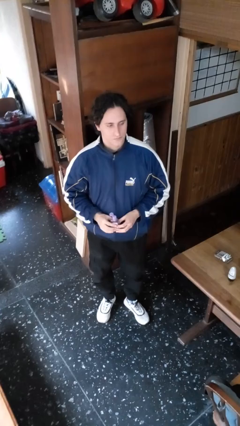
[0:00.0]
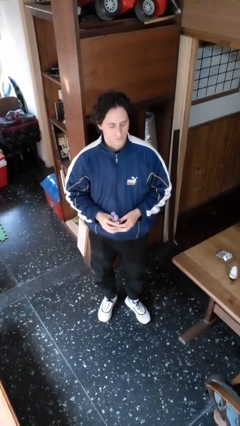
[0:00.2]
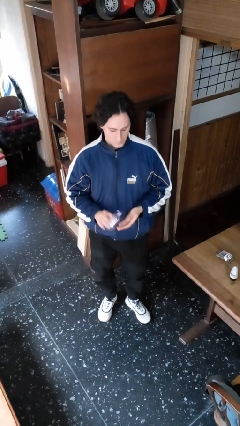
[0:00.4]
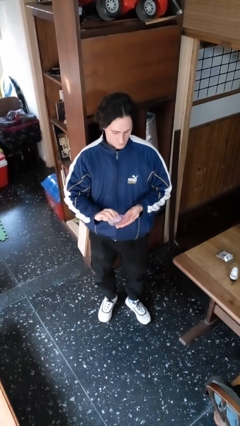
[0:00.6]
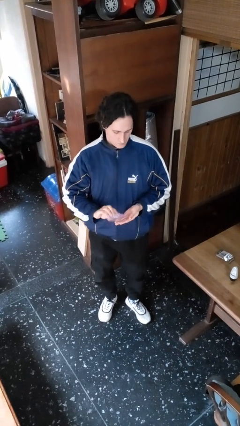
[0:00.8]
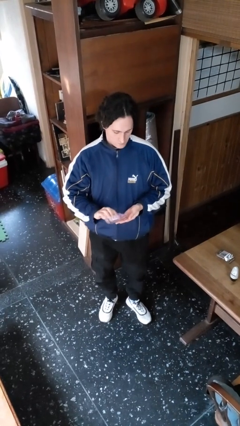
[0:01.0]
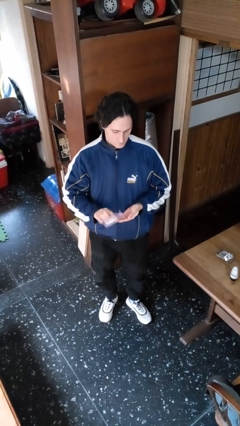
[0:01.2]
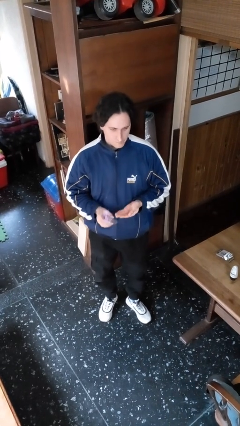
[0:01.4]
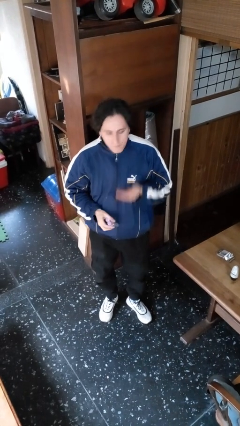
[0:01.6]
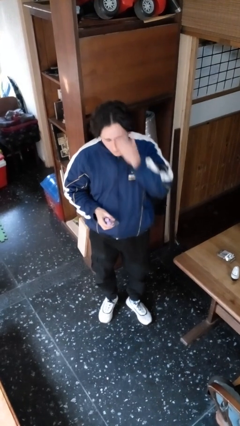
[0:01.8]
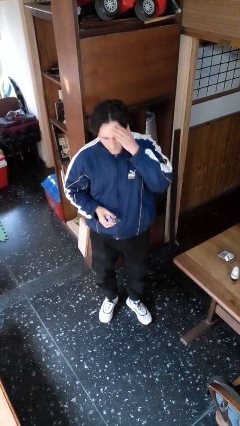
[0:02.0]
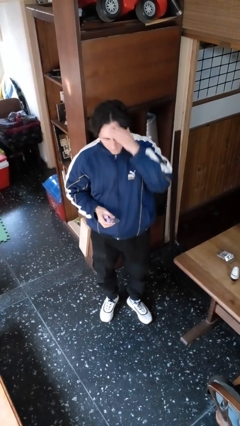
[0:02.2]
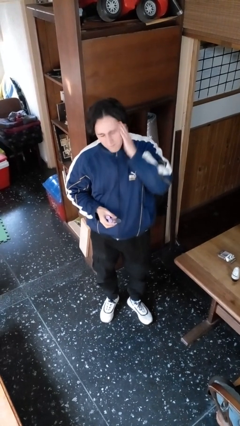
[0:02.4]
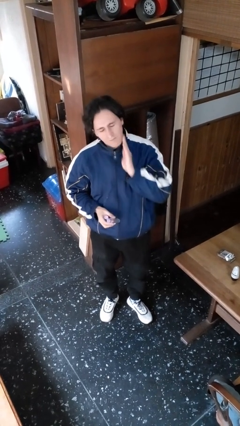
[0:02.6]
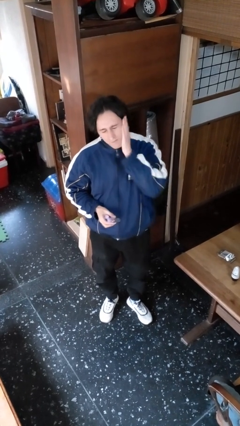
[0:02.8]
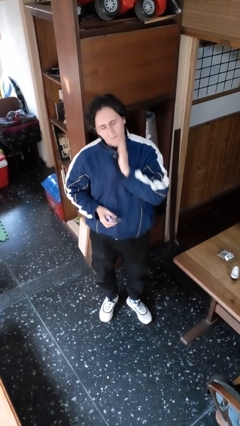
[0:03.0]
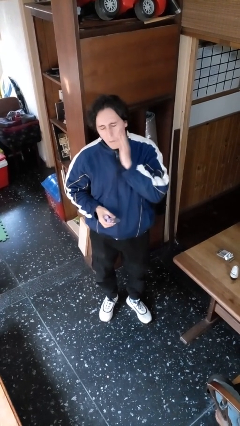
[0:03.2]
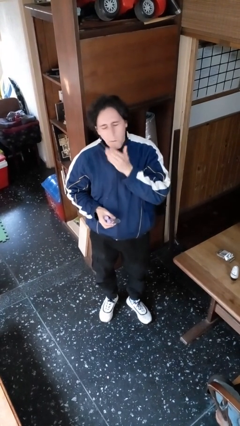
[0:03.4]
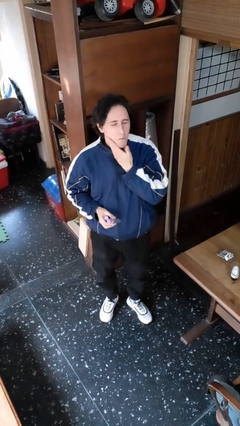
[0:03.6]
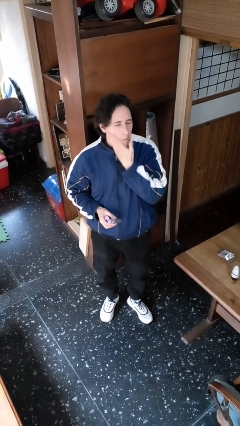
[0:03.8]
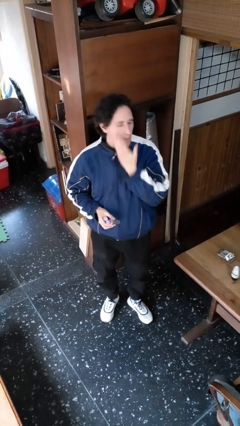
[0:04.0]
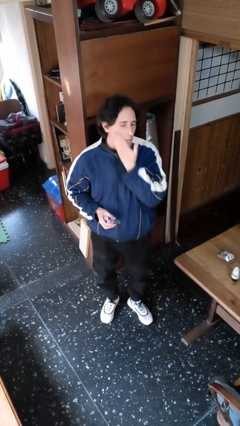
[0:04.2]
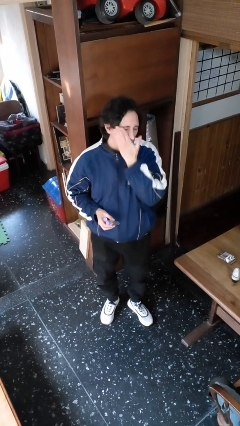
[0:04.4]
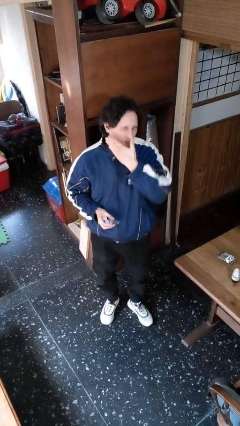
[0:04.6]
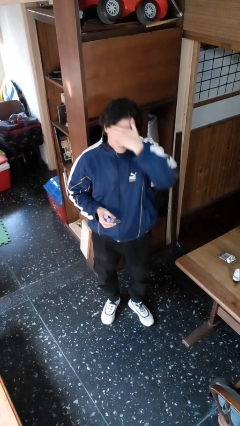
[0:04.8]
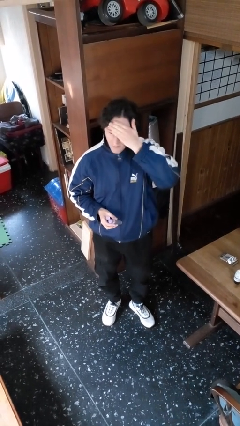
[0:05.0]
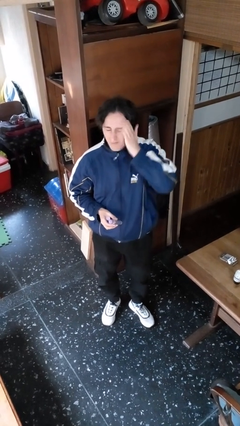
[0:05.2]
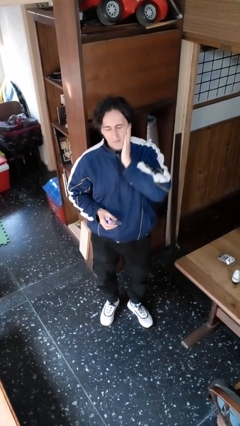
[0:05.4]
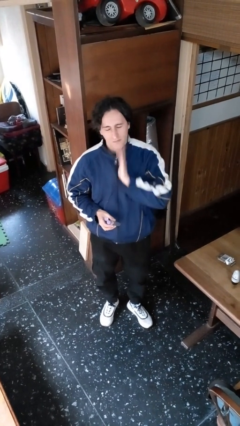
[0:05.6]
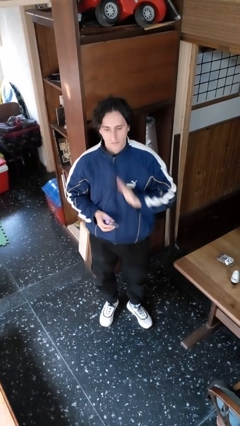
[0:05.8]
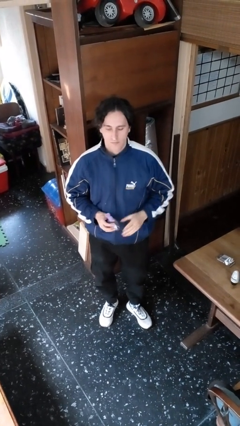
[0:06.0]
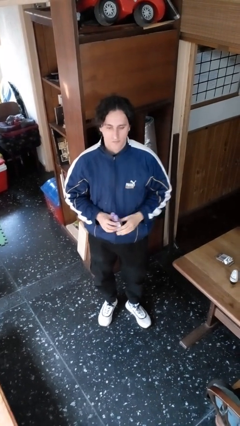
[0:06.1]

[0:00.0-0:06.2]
person applies facial moisturizer

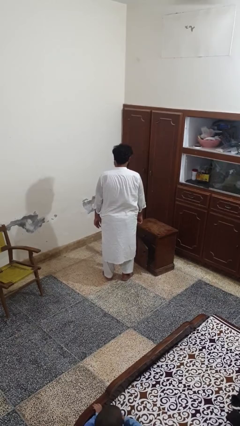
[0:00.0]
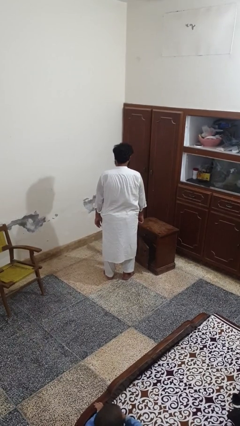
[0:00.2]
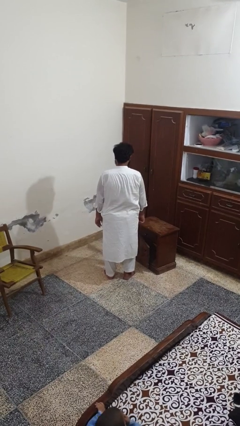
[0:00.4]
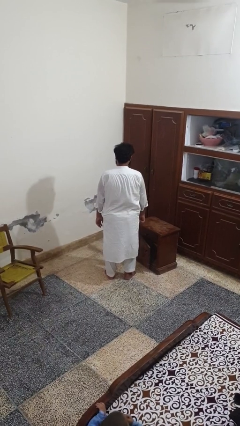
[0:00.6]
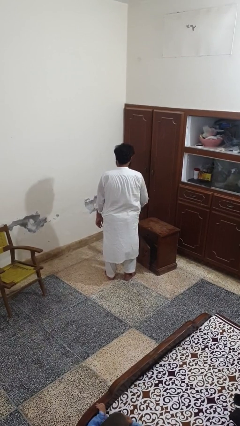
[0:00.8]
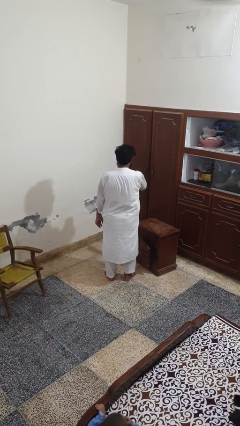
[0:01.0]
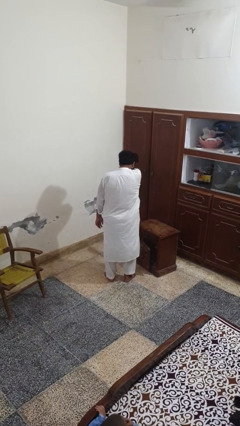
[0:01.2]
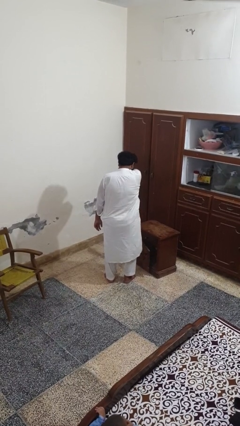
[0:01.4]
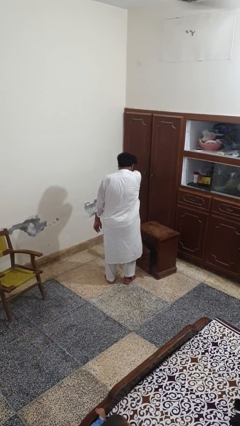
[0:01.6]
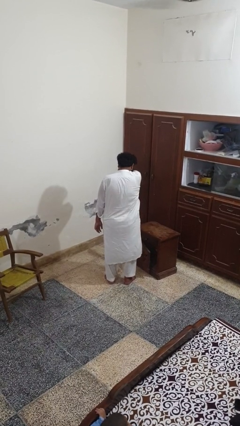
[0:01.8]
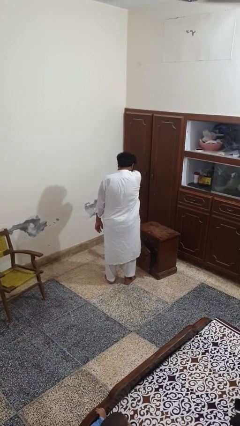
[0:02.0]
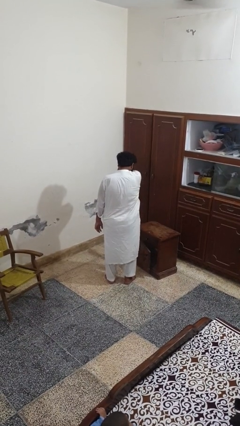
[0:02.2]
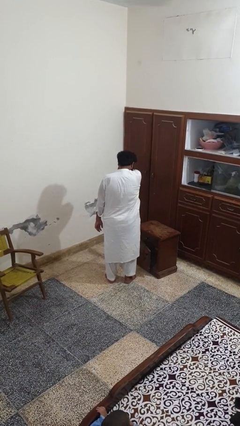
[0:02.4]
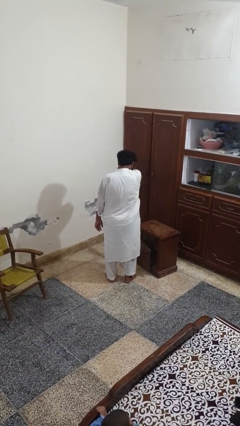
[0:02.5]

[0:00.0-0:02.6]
person sneezes into arm

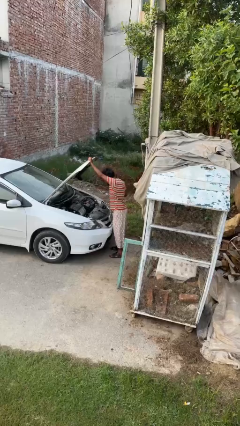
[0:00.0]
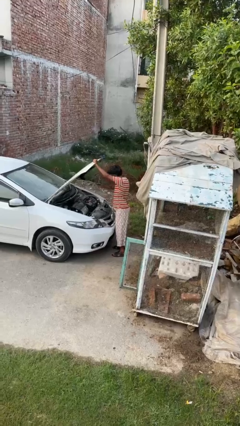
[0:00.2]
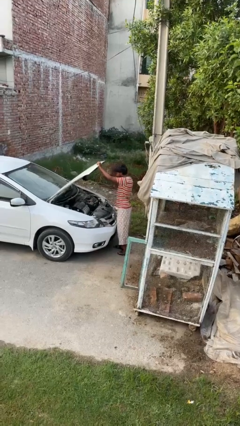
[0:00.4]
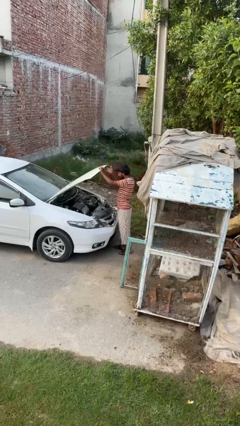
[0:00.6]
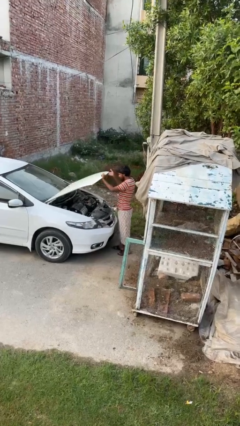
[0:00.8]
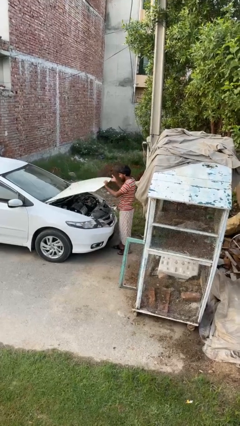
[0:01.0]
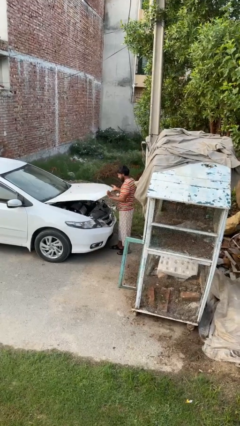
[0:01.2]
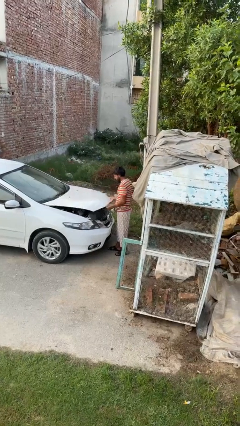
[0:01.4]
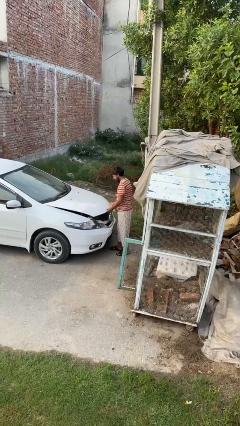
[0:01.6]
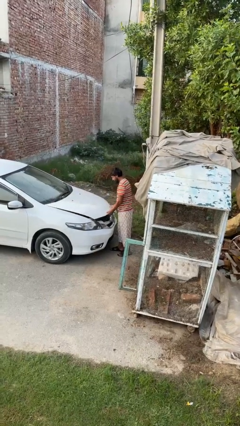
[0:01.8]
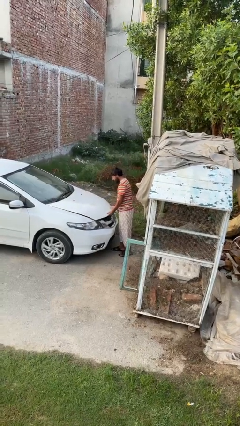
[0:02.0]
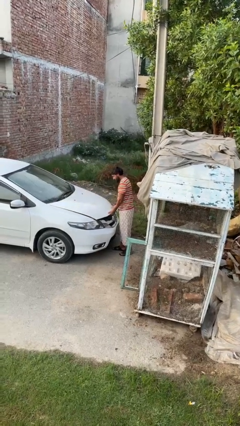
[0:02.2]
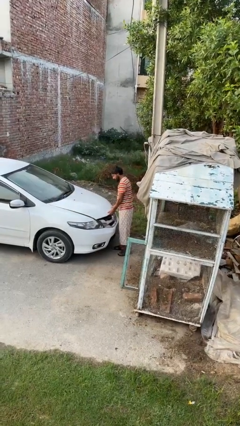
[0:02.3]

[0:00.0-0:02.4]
person closes car hood

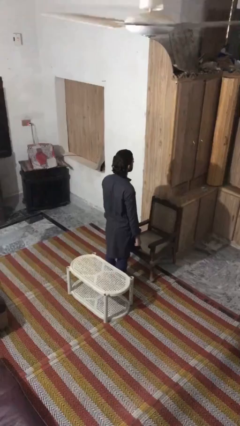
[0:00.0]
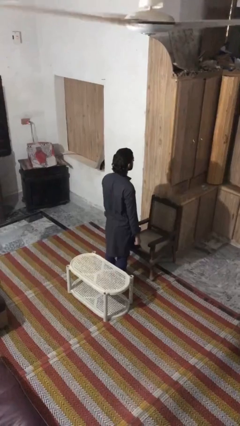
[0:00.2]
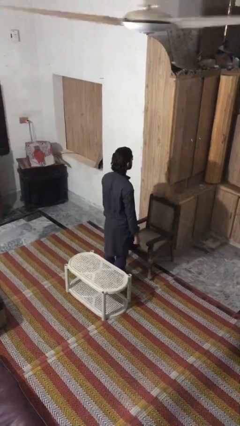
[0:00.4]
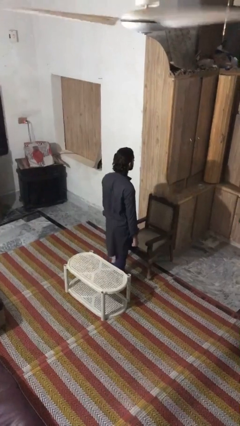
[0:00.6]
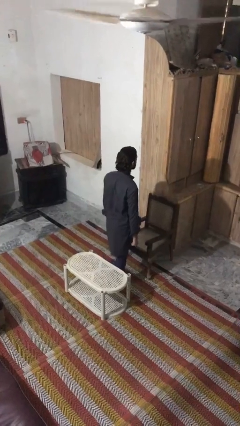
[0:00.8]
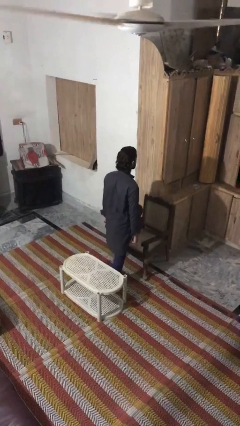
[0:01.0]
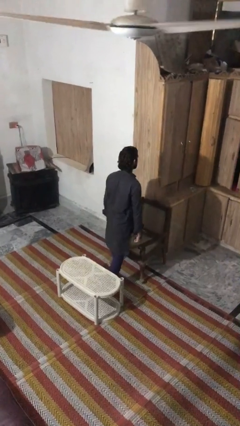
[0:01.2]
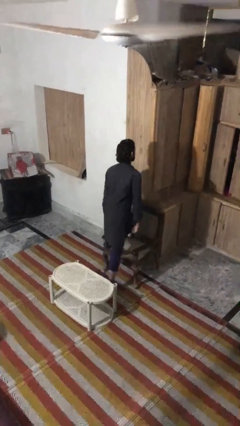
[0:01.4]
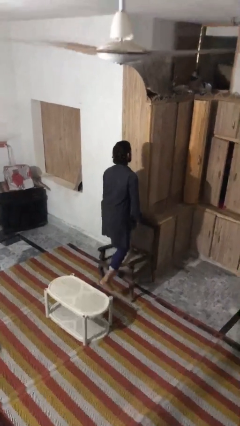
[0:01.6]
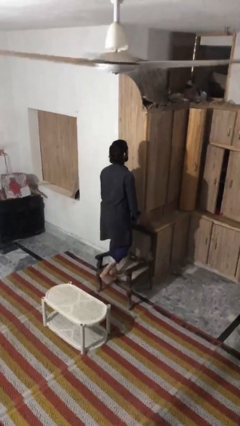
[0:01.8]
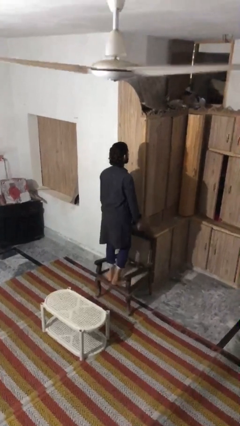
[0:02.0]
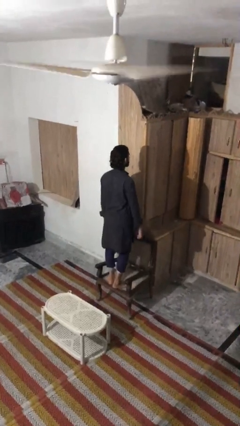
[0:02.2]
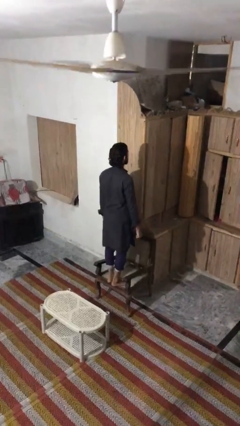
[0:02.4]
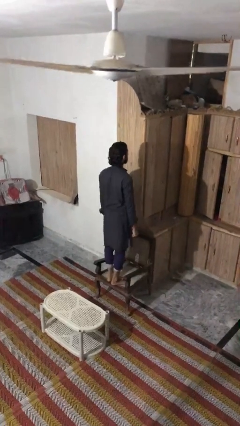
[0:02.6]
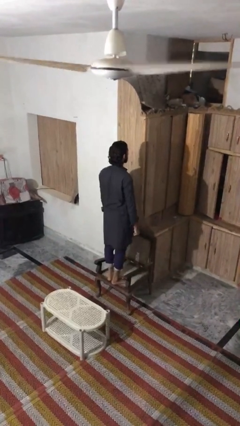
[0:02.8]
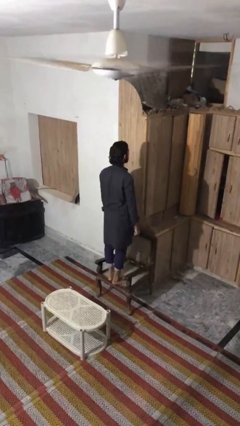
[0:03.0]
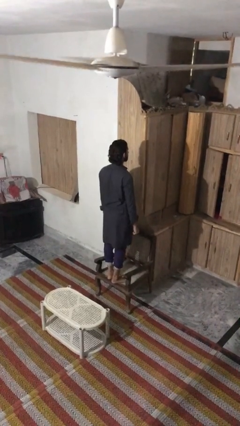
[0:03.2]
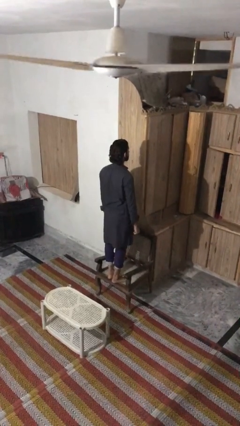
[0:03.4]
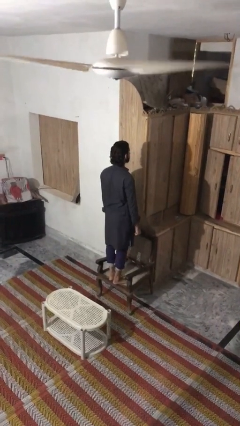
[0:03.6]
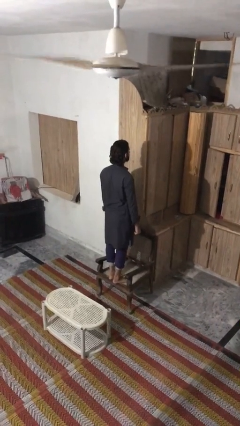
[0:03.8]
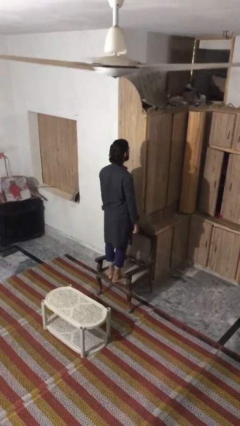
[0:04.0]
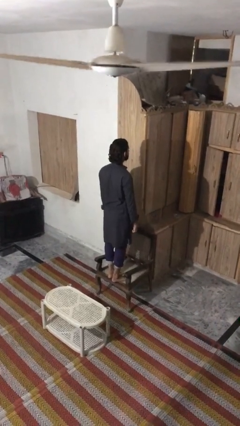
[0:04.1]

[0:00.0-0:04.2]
person climbs on chair

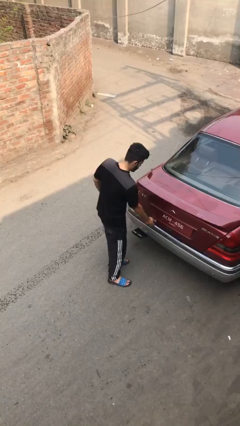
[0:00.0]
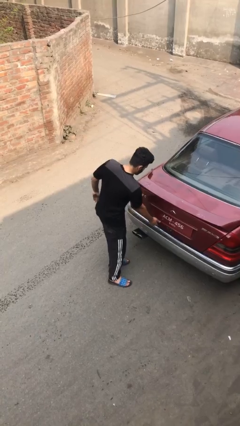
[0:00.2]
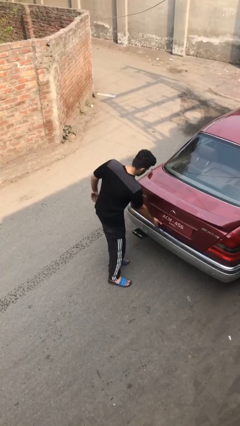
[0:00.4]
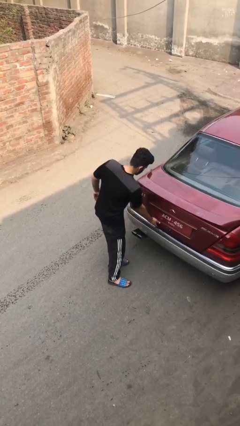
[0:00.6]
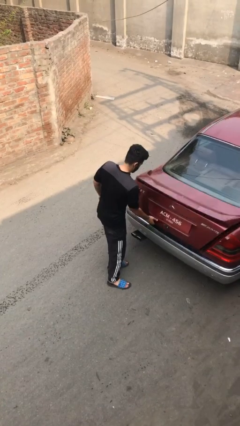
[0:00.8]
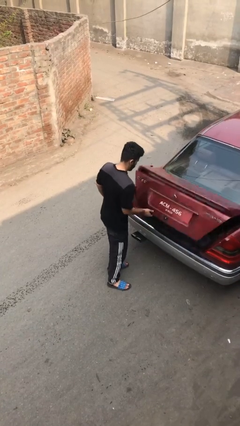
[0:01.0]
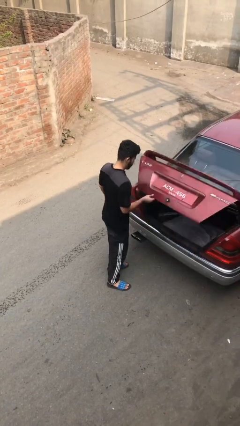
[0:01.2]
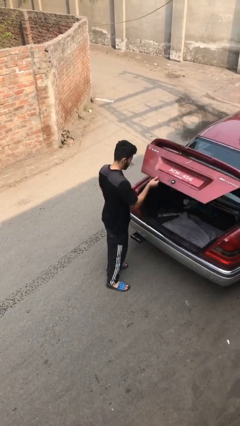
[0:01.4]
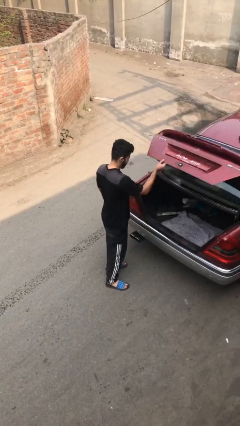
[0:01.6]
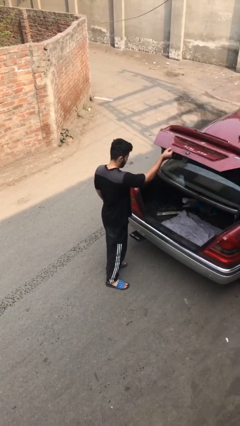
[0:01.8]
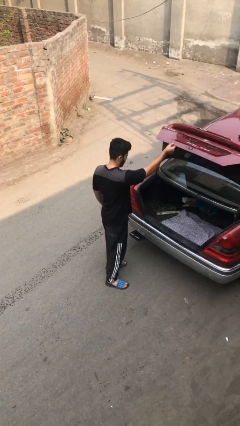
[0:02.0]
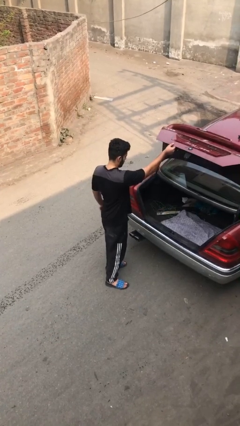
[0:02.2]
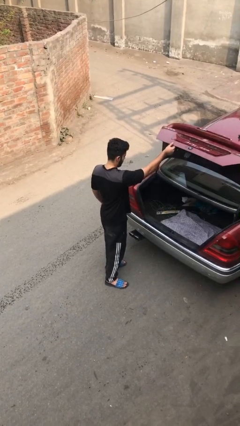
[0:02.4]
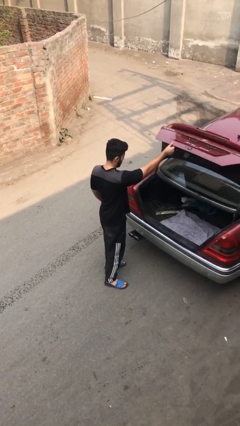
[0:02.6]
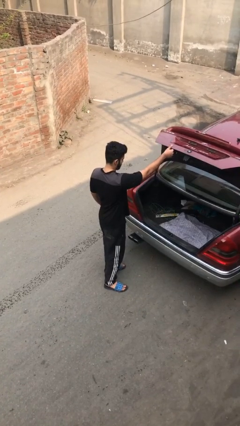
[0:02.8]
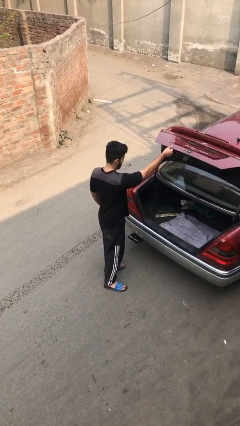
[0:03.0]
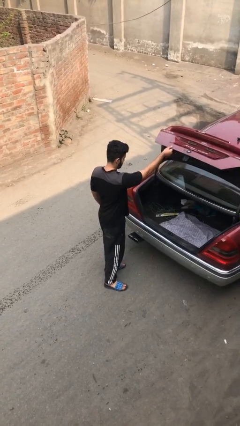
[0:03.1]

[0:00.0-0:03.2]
person opens car trunk
